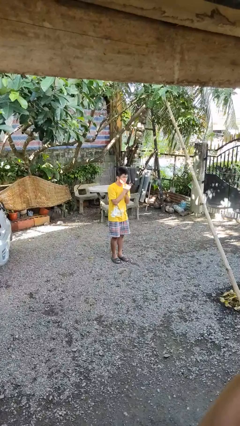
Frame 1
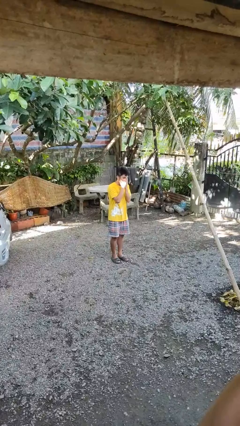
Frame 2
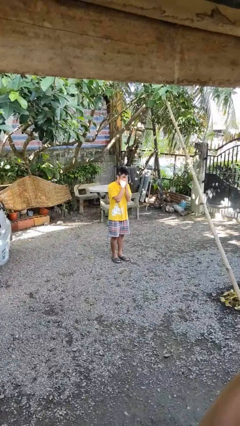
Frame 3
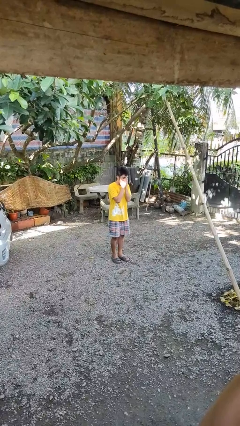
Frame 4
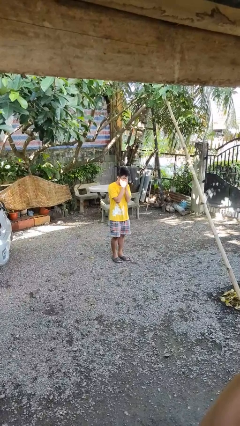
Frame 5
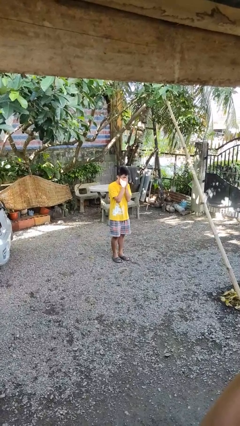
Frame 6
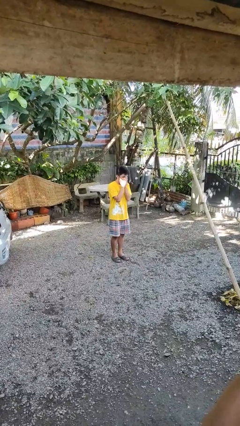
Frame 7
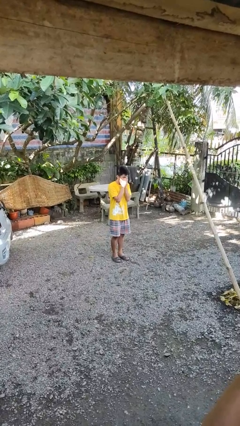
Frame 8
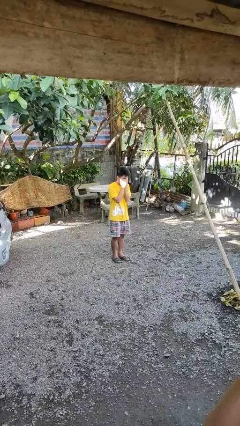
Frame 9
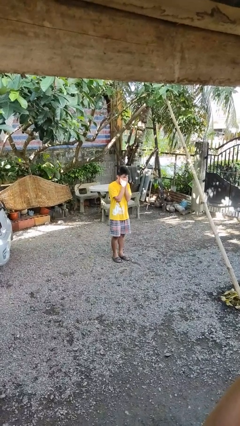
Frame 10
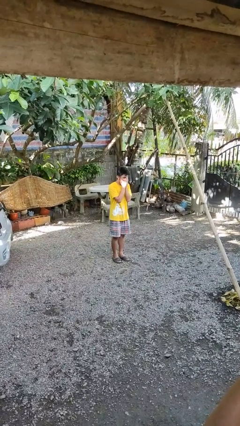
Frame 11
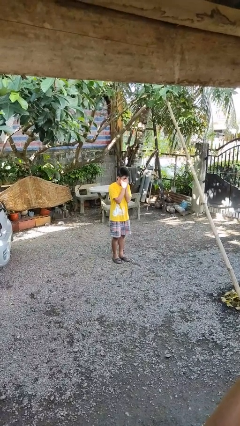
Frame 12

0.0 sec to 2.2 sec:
person blows into hands

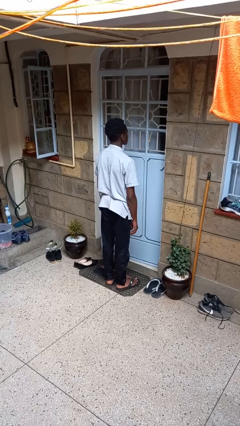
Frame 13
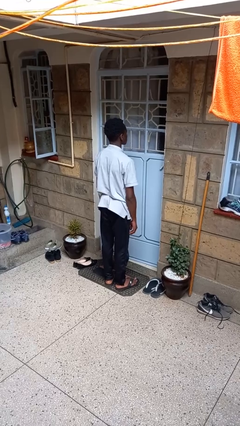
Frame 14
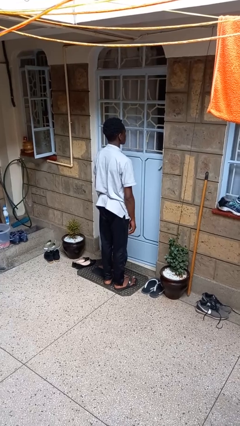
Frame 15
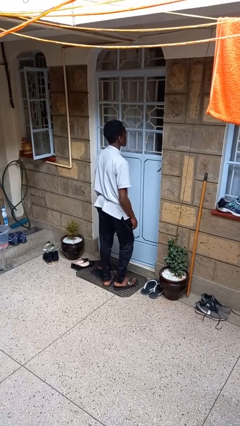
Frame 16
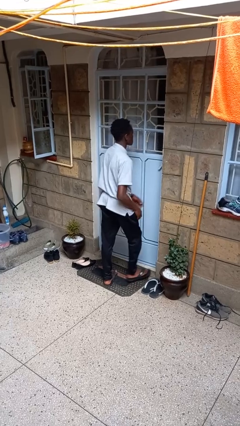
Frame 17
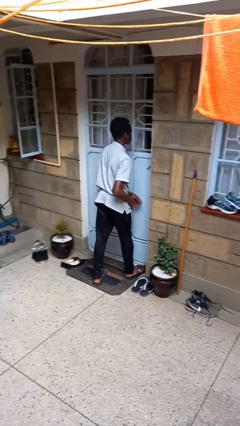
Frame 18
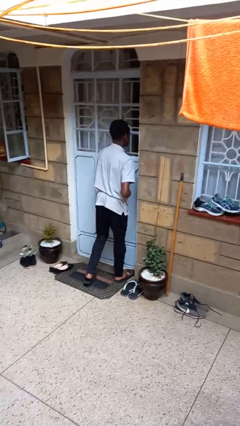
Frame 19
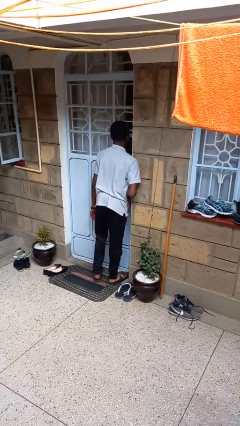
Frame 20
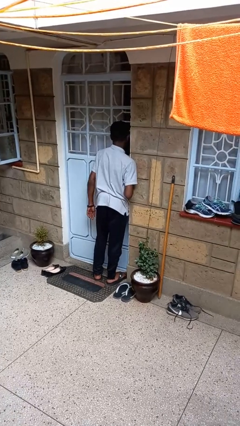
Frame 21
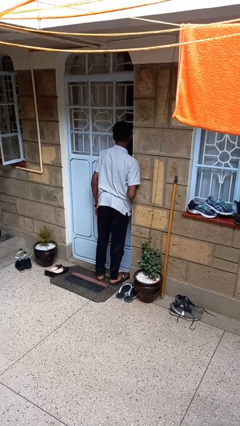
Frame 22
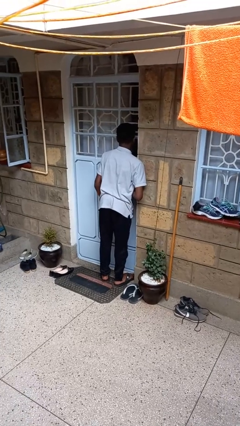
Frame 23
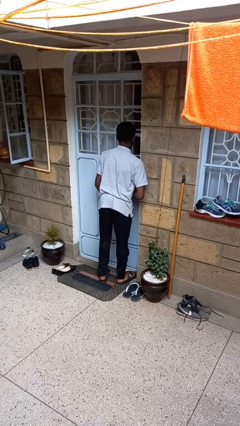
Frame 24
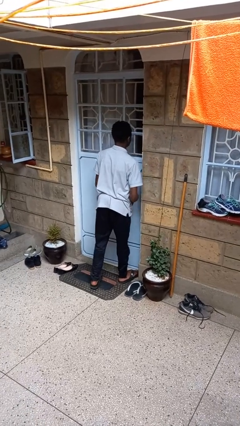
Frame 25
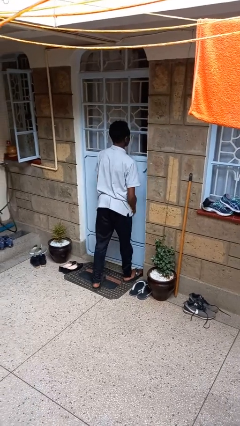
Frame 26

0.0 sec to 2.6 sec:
person bumps into wall

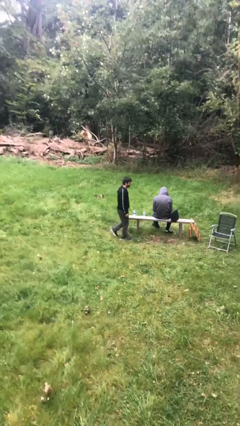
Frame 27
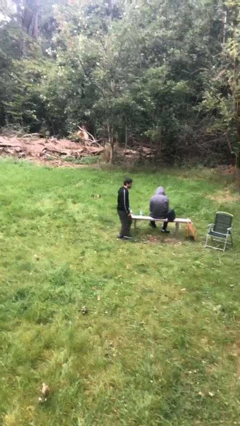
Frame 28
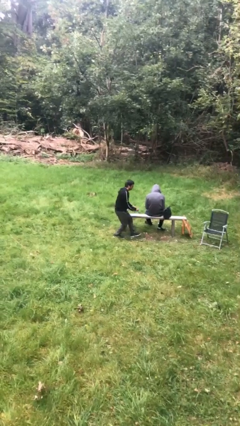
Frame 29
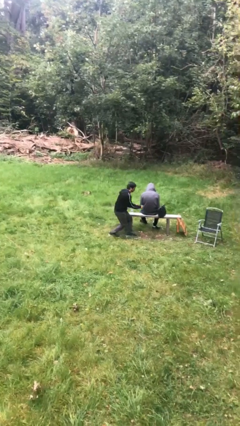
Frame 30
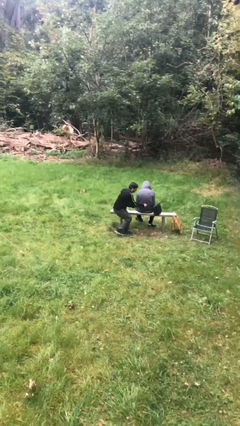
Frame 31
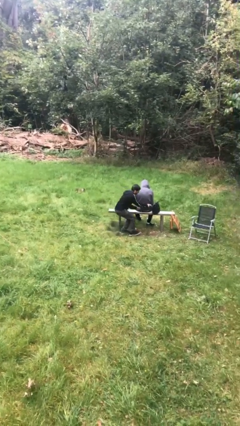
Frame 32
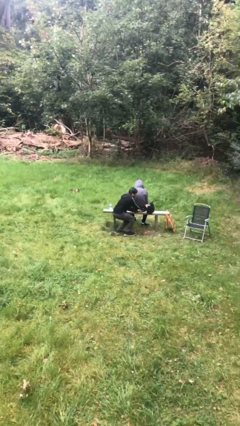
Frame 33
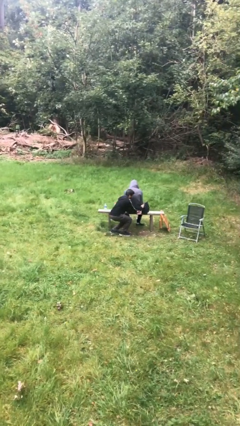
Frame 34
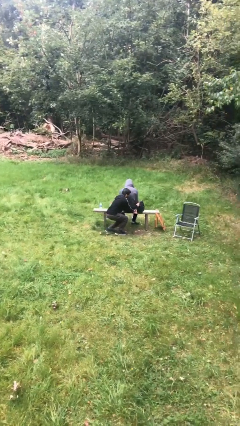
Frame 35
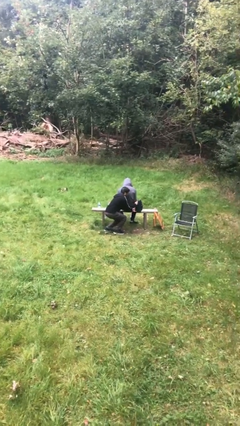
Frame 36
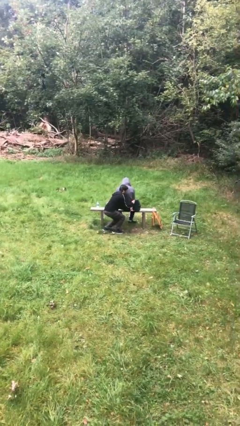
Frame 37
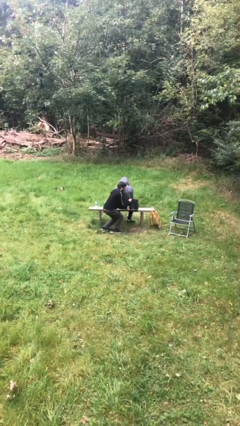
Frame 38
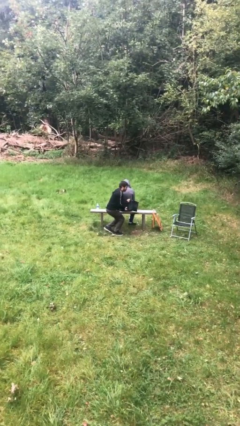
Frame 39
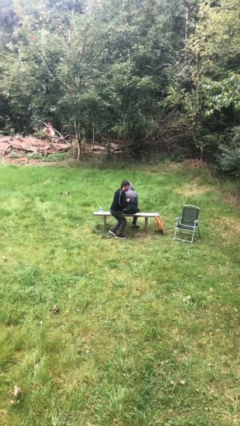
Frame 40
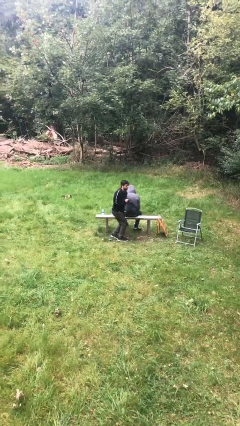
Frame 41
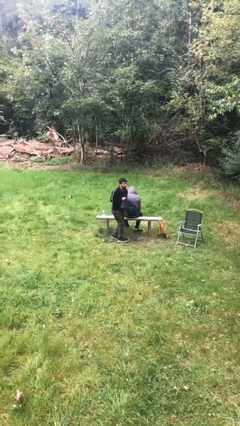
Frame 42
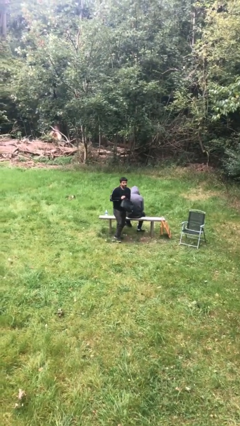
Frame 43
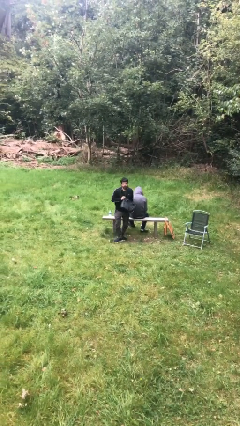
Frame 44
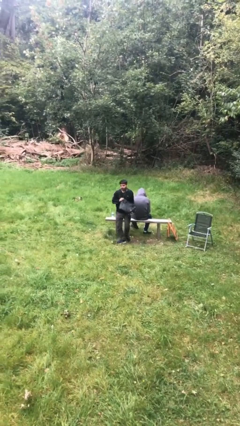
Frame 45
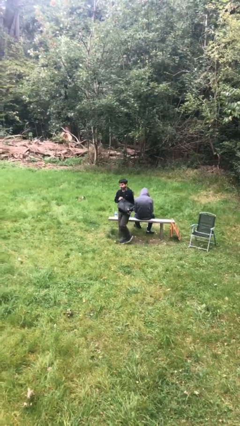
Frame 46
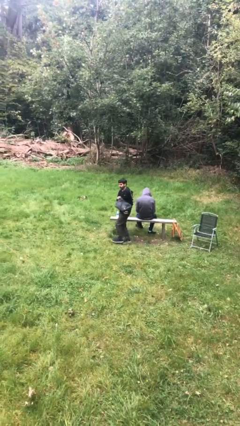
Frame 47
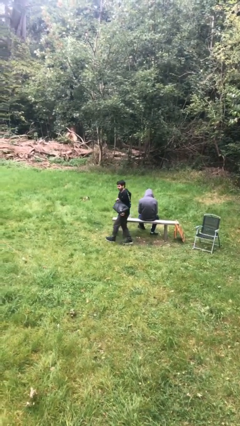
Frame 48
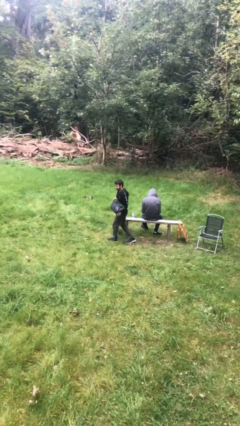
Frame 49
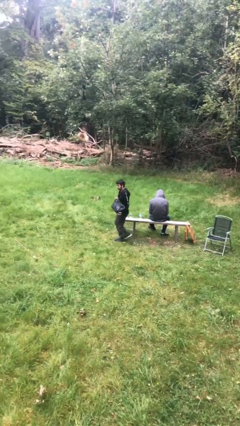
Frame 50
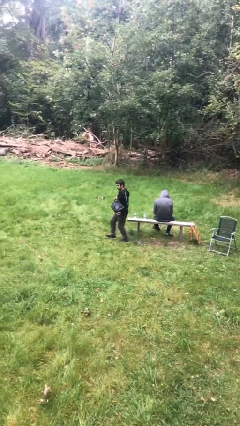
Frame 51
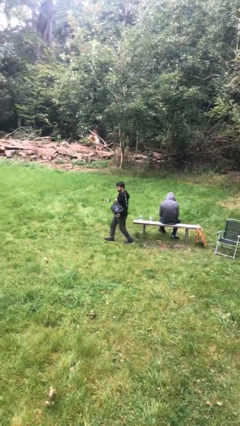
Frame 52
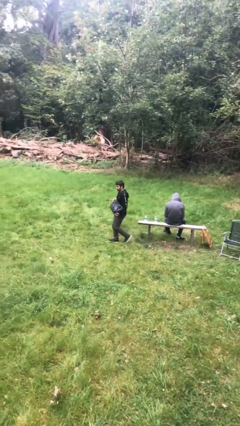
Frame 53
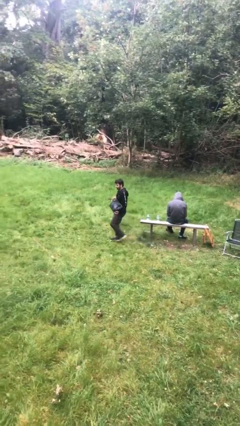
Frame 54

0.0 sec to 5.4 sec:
person steals object from person

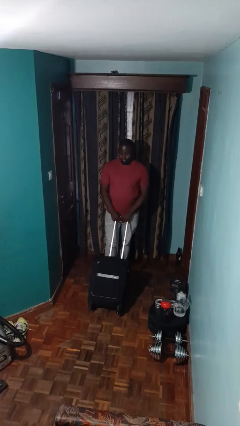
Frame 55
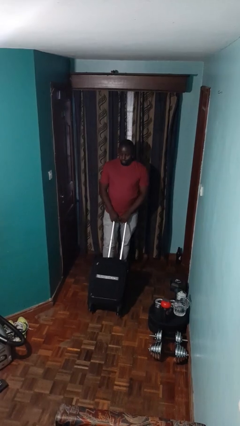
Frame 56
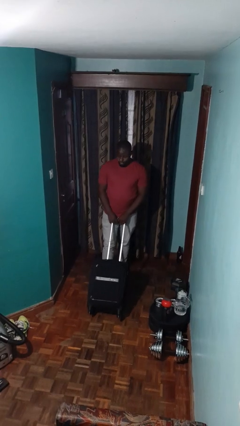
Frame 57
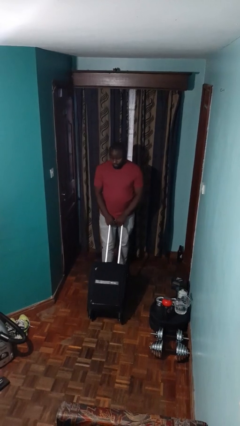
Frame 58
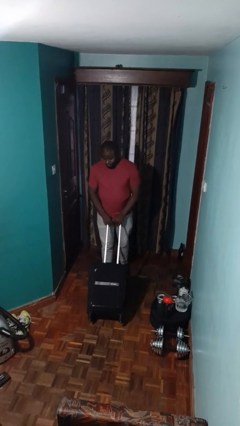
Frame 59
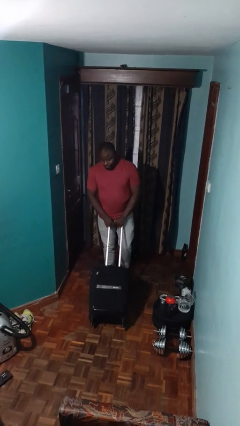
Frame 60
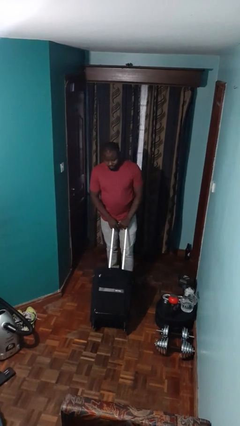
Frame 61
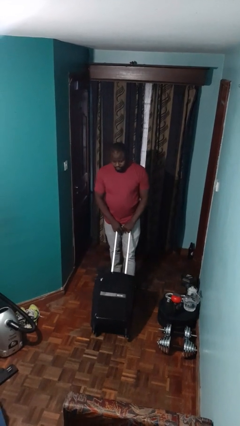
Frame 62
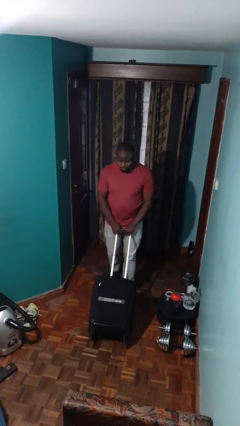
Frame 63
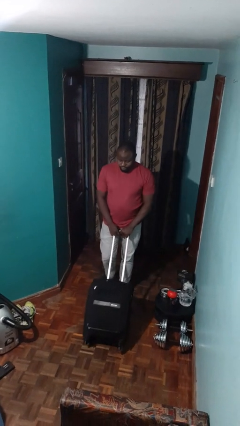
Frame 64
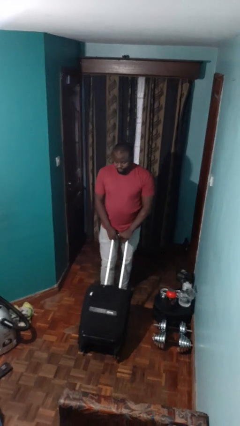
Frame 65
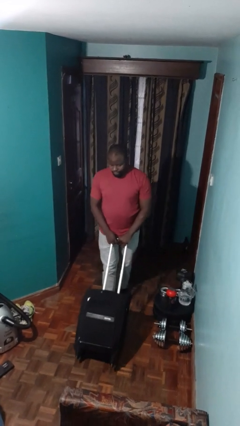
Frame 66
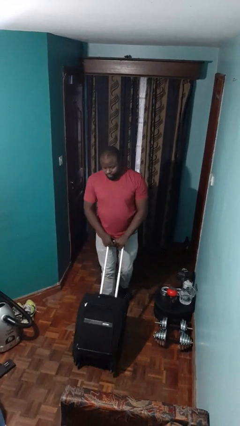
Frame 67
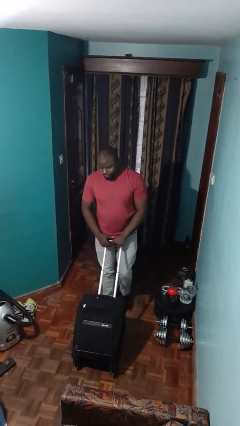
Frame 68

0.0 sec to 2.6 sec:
person pushes wheeled cart

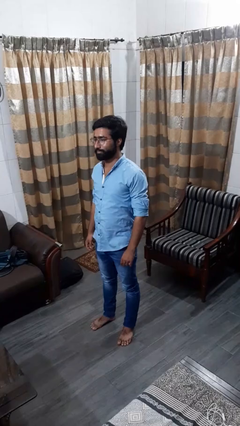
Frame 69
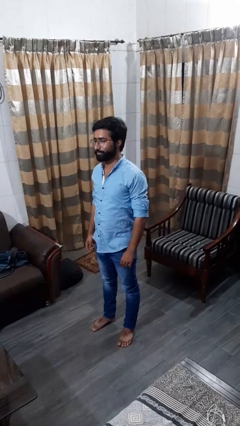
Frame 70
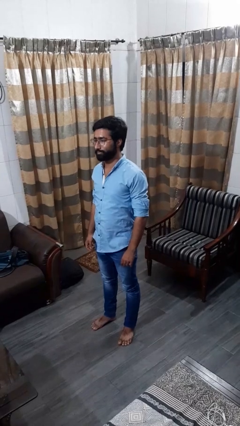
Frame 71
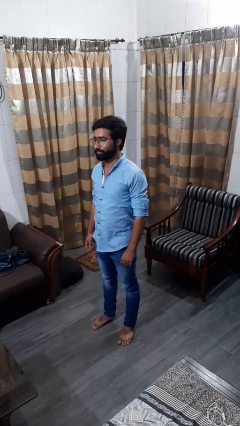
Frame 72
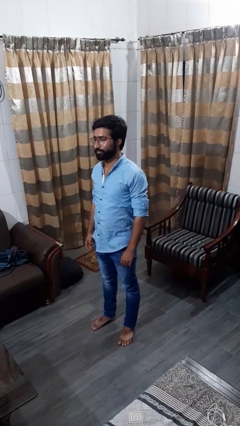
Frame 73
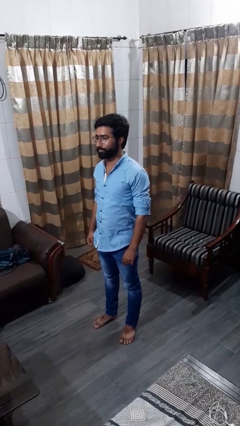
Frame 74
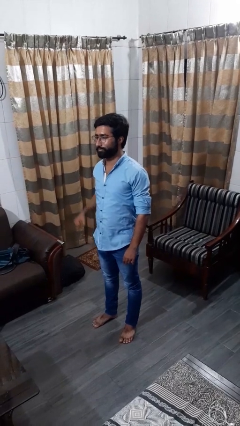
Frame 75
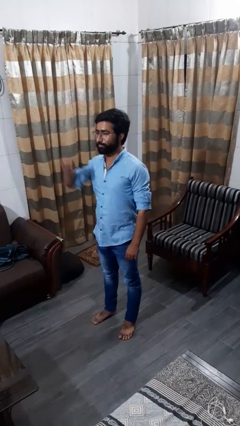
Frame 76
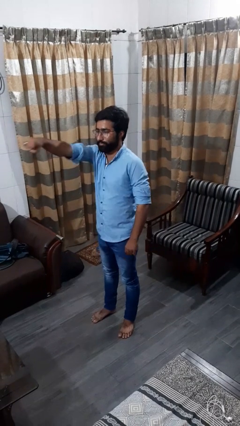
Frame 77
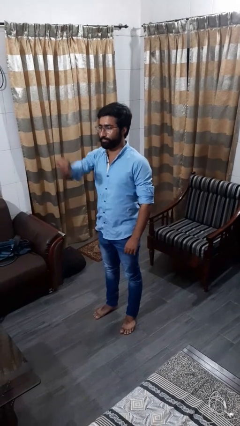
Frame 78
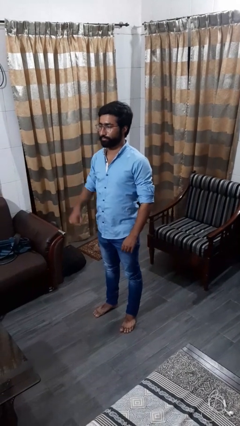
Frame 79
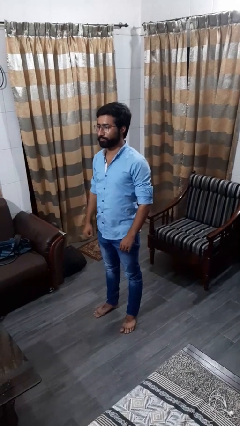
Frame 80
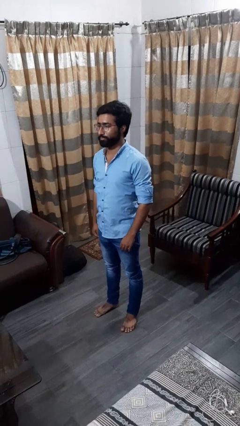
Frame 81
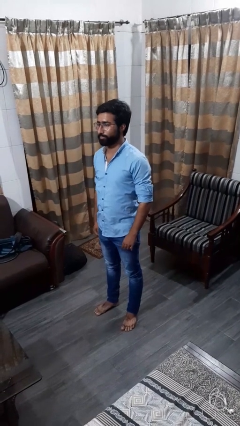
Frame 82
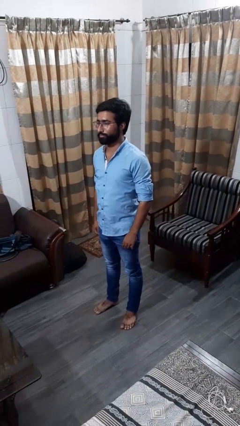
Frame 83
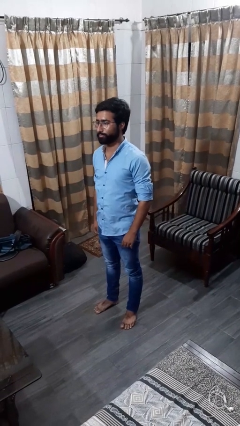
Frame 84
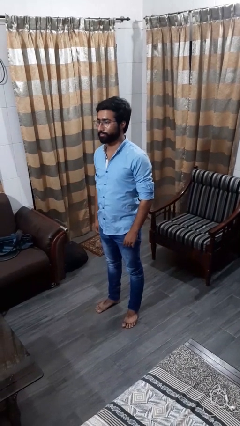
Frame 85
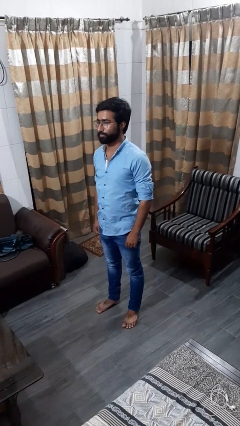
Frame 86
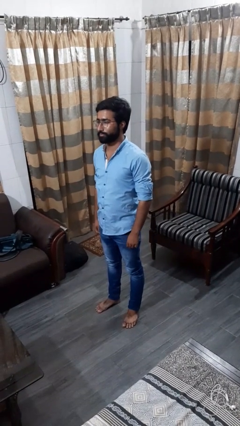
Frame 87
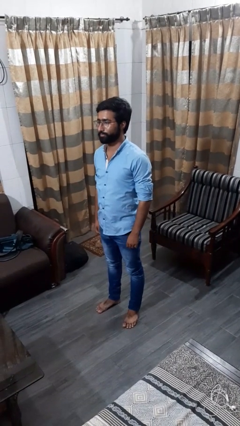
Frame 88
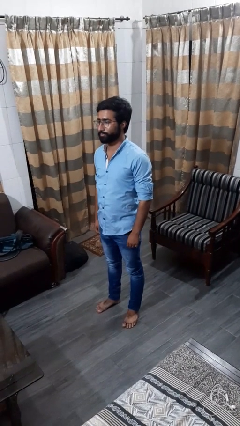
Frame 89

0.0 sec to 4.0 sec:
person punches

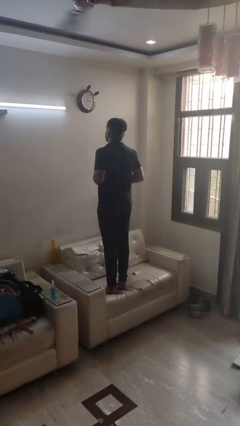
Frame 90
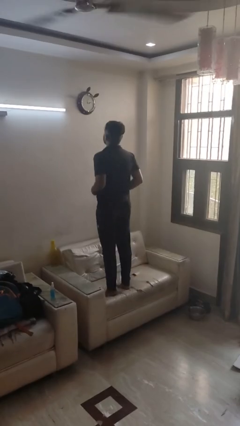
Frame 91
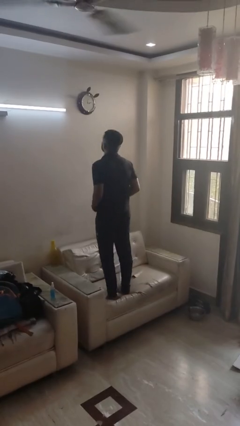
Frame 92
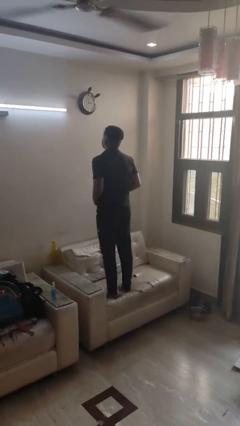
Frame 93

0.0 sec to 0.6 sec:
person jumps on couch
